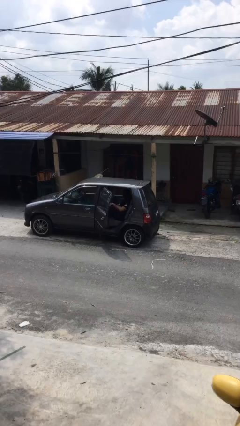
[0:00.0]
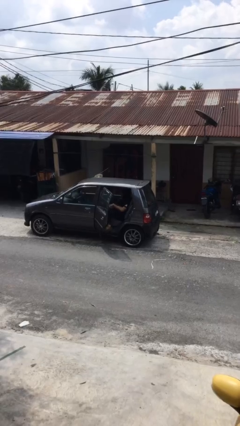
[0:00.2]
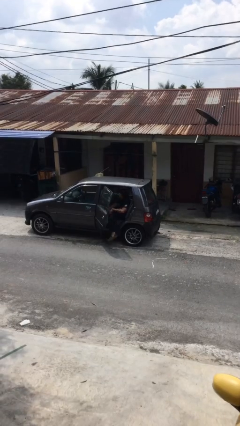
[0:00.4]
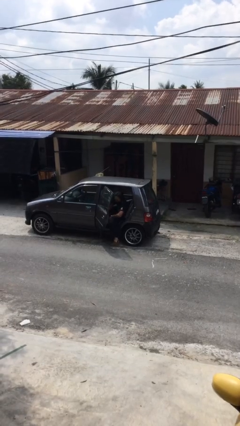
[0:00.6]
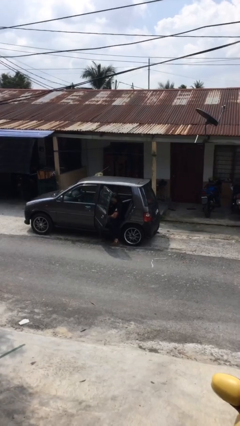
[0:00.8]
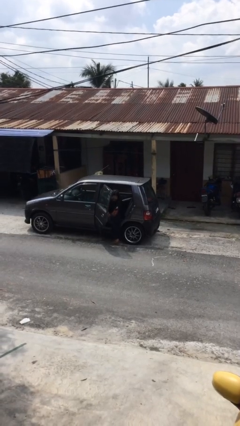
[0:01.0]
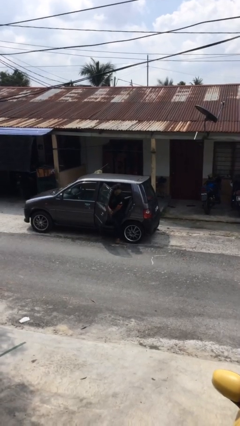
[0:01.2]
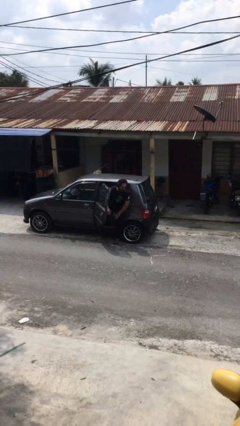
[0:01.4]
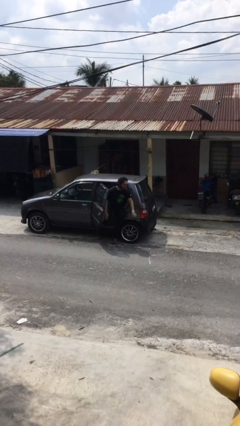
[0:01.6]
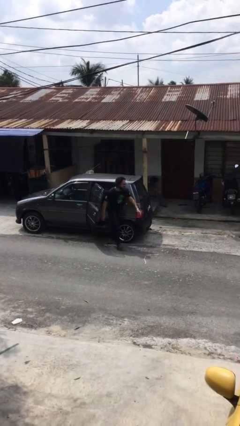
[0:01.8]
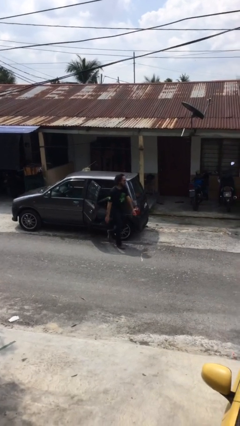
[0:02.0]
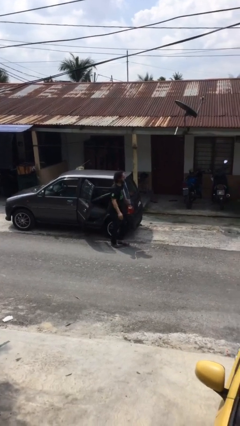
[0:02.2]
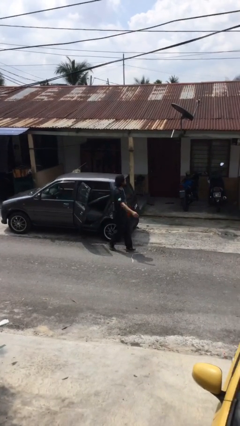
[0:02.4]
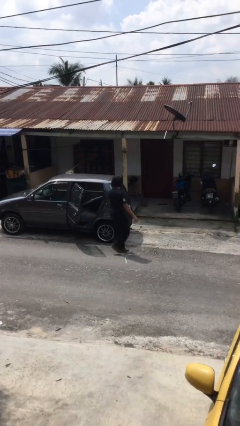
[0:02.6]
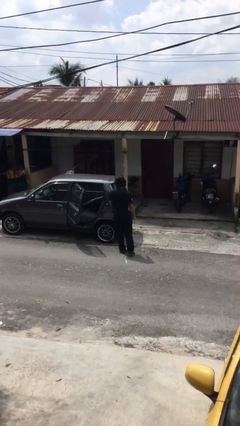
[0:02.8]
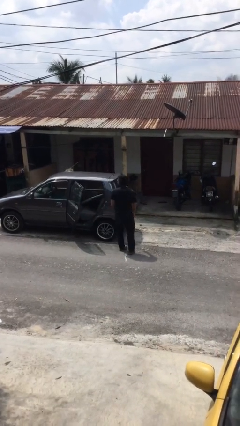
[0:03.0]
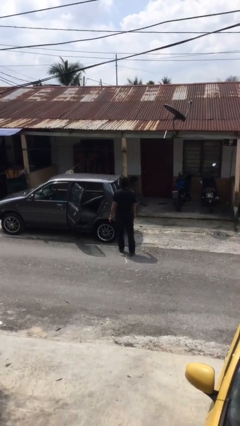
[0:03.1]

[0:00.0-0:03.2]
person exits car

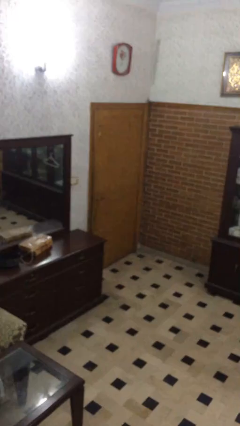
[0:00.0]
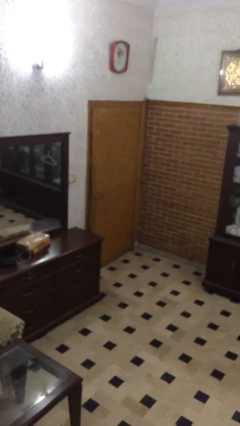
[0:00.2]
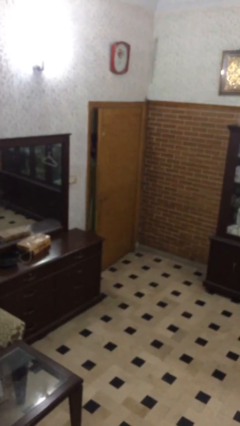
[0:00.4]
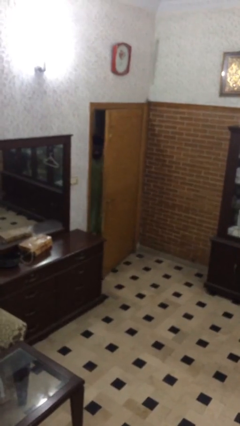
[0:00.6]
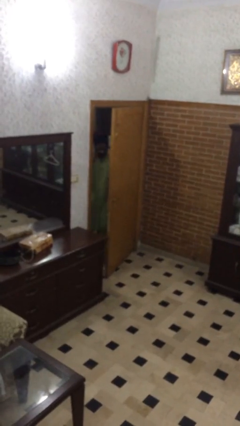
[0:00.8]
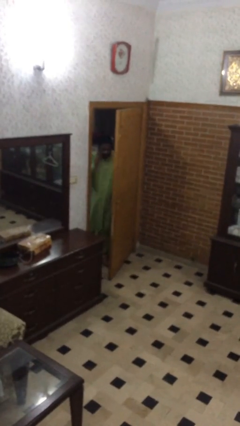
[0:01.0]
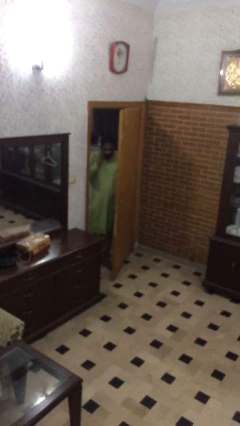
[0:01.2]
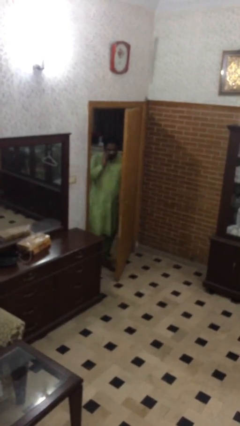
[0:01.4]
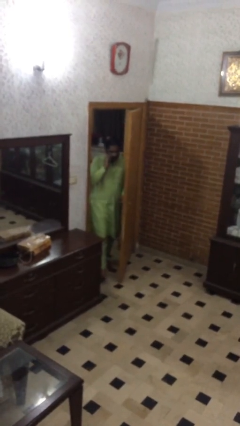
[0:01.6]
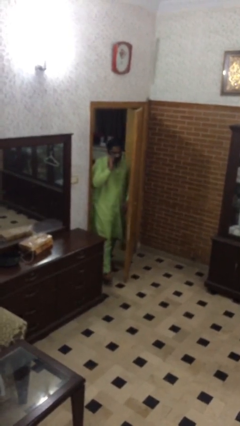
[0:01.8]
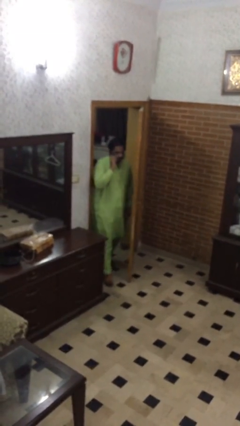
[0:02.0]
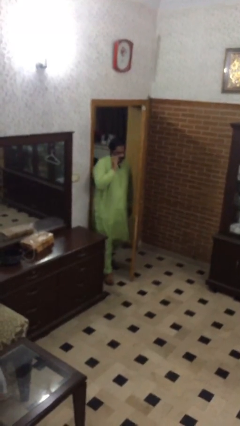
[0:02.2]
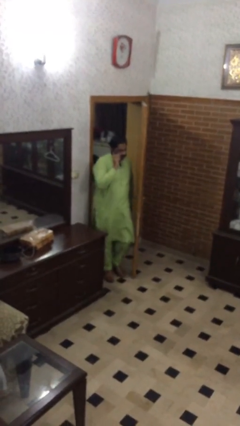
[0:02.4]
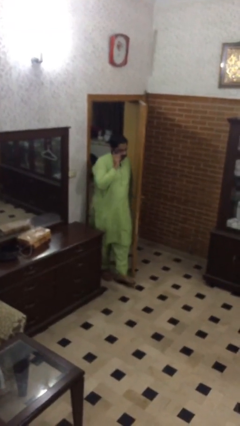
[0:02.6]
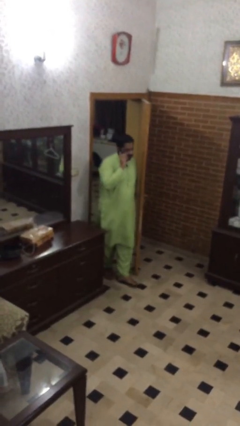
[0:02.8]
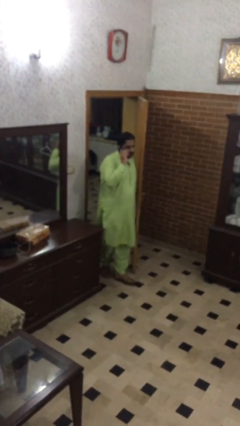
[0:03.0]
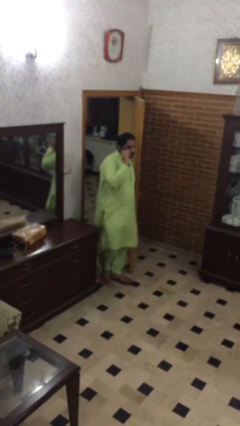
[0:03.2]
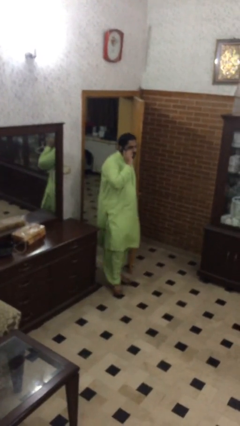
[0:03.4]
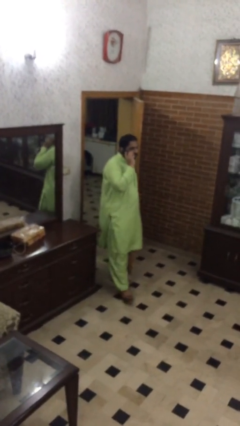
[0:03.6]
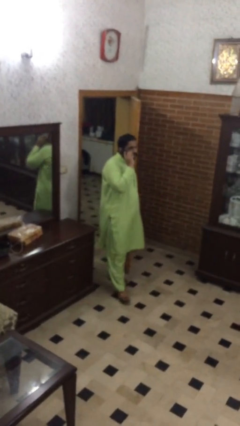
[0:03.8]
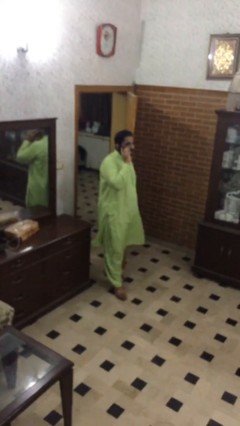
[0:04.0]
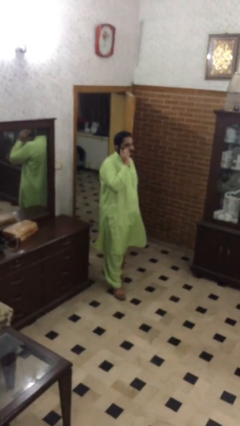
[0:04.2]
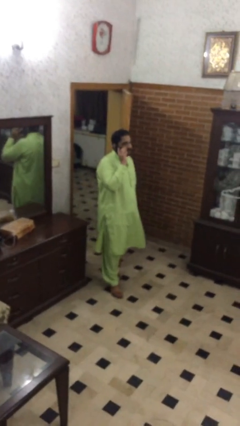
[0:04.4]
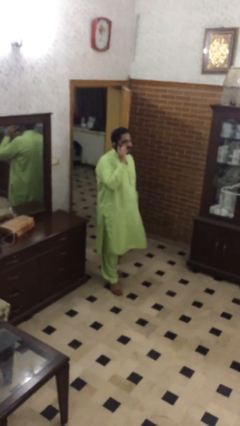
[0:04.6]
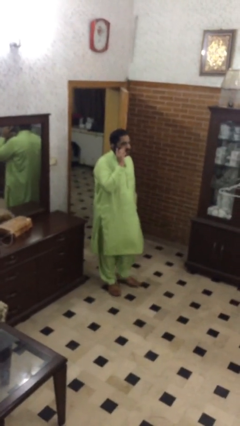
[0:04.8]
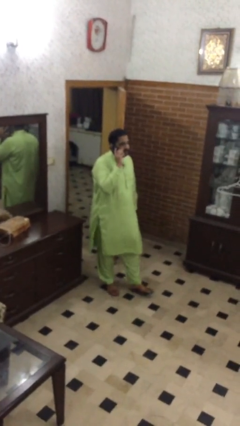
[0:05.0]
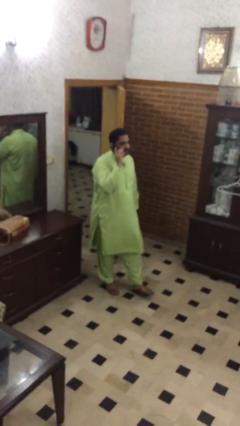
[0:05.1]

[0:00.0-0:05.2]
person enters scene through structure

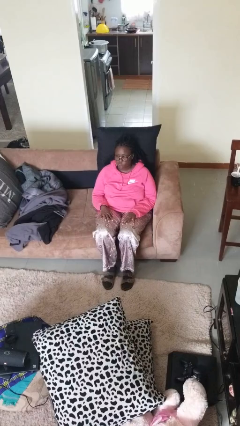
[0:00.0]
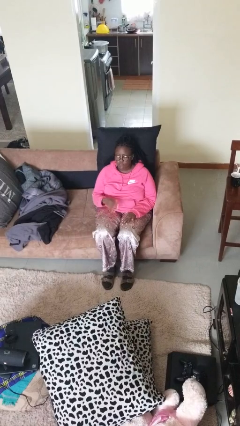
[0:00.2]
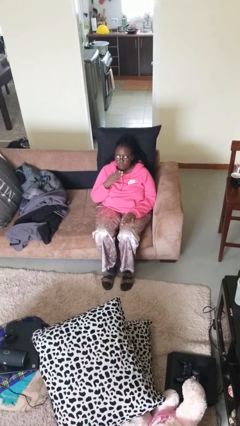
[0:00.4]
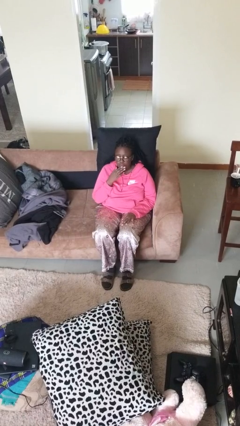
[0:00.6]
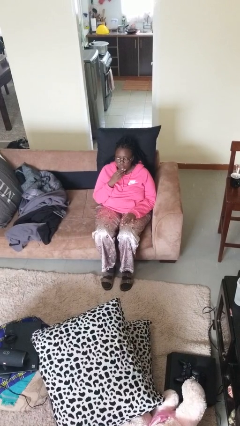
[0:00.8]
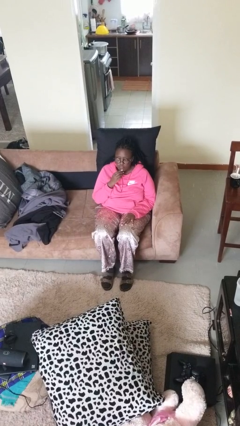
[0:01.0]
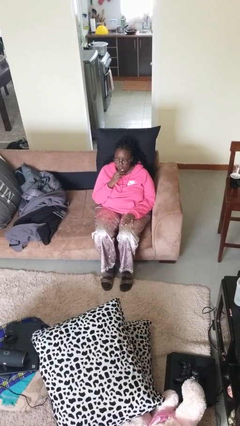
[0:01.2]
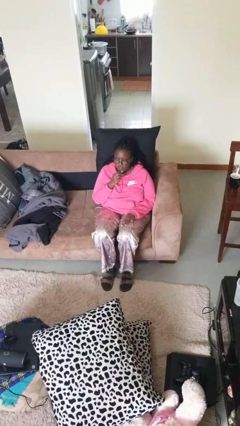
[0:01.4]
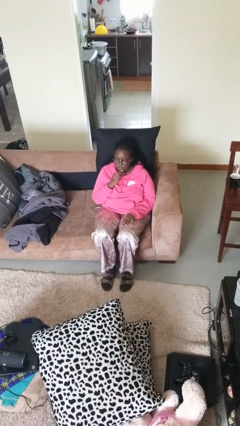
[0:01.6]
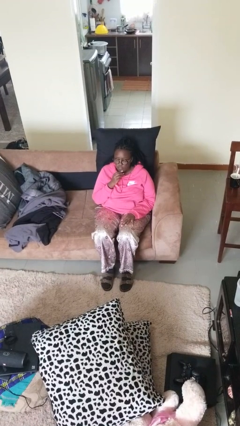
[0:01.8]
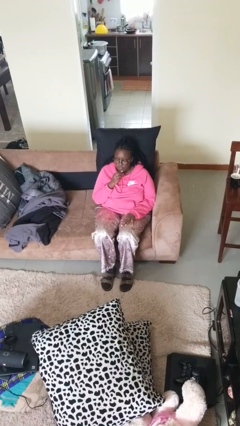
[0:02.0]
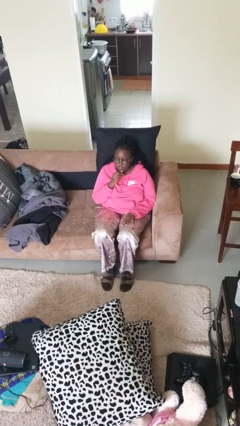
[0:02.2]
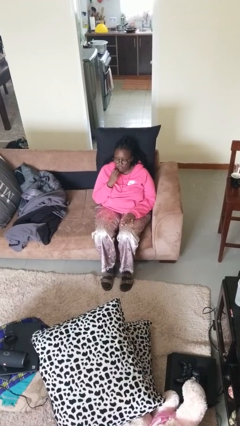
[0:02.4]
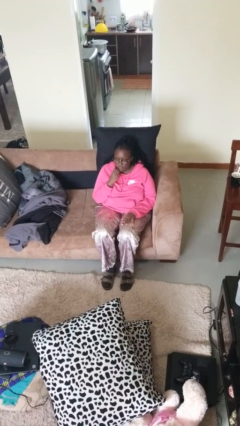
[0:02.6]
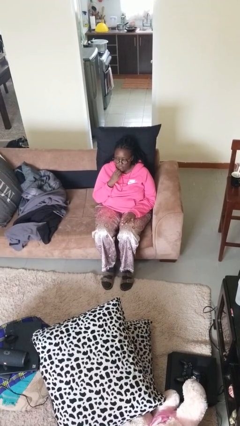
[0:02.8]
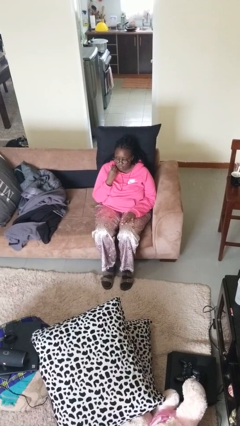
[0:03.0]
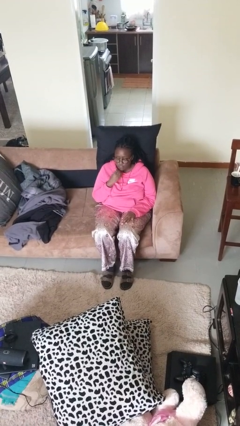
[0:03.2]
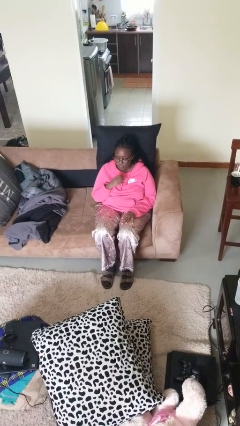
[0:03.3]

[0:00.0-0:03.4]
person strokes chin

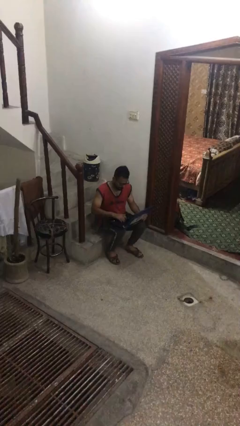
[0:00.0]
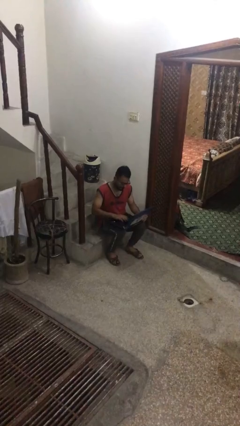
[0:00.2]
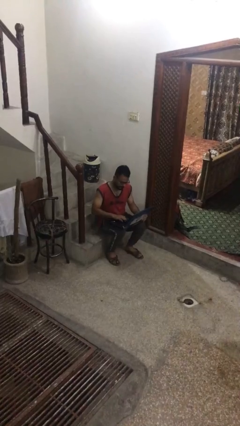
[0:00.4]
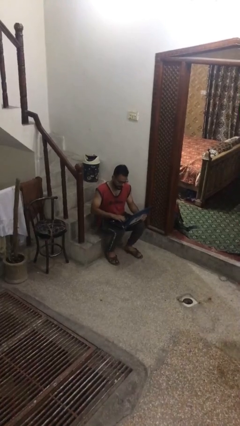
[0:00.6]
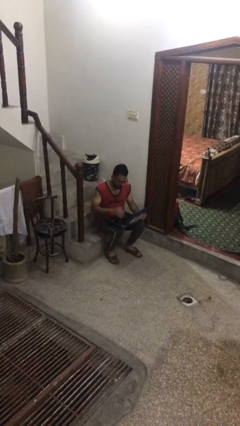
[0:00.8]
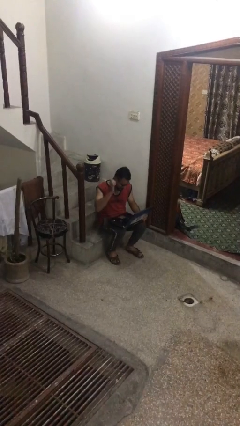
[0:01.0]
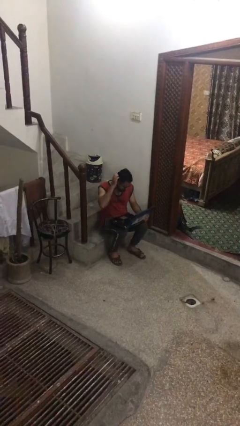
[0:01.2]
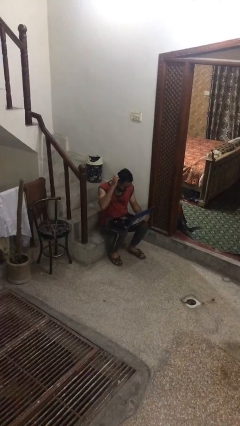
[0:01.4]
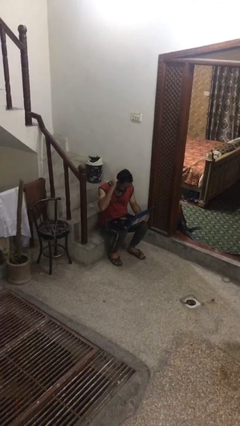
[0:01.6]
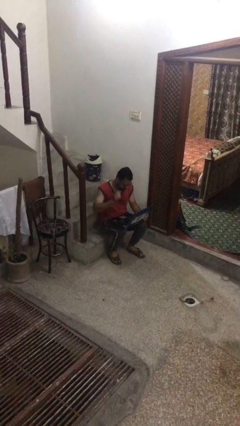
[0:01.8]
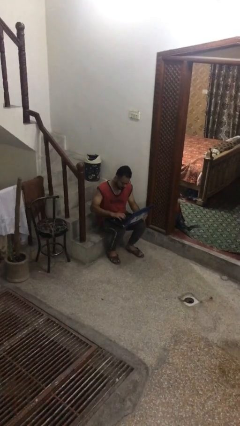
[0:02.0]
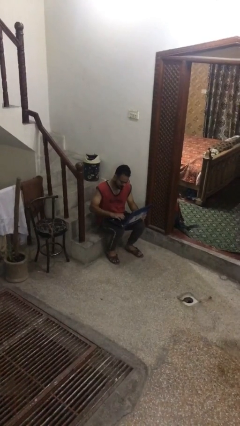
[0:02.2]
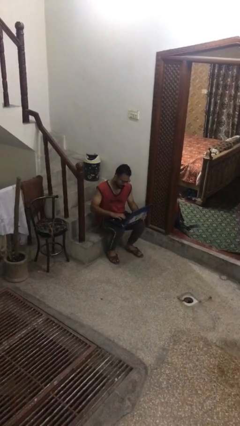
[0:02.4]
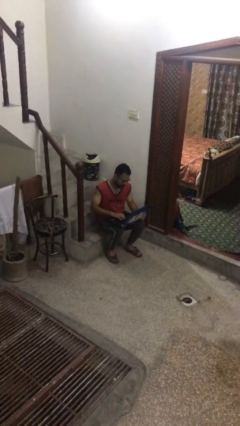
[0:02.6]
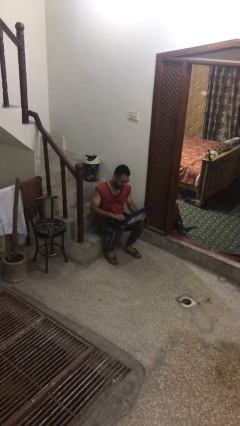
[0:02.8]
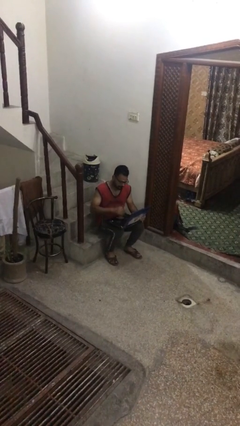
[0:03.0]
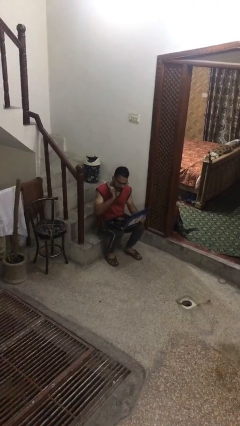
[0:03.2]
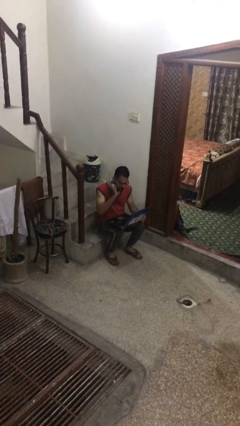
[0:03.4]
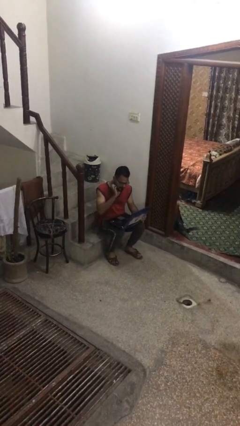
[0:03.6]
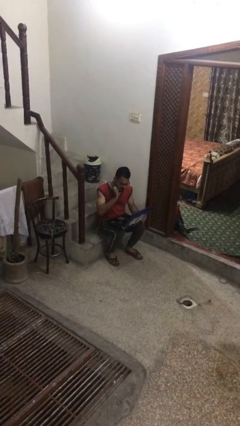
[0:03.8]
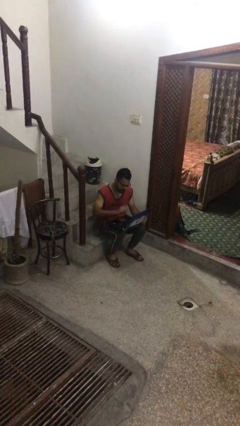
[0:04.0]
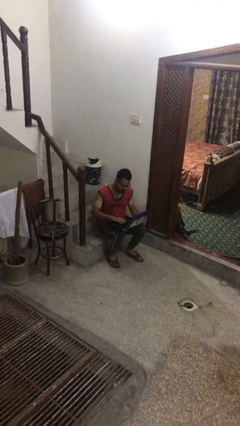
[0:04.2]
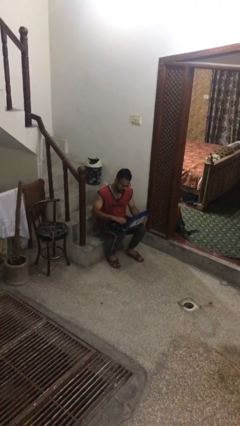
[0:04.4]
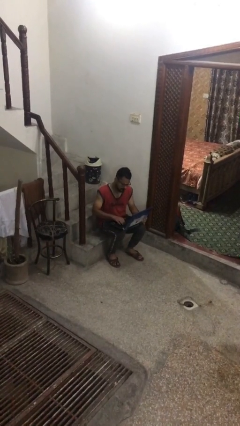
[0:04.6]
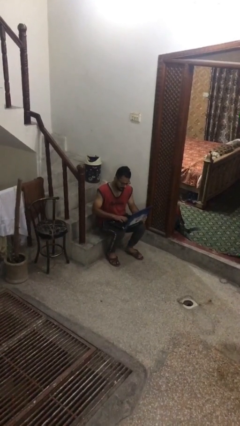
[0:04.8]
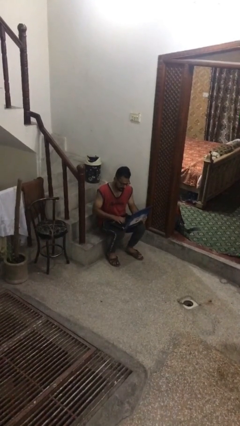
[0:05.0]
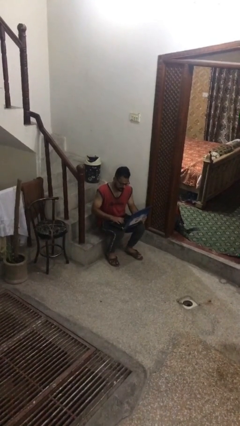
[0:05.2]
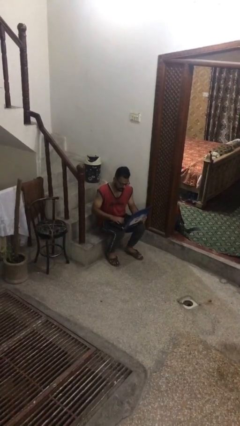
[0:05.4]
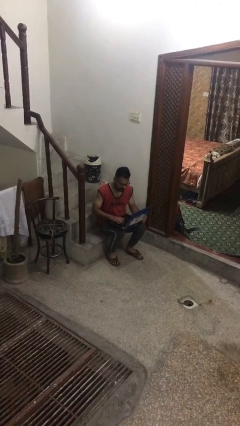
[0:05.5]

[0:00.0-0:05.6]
person interacts with laptop
